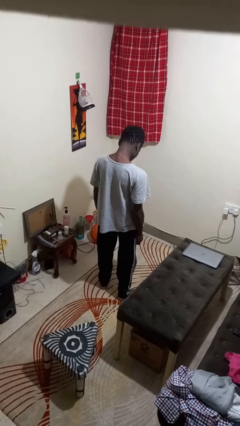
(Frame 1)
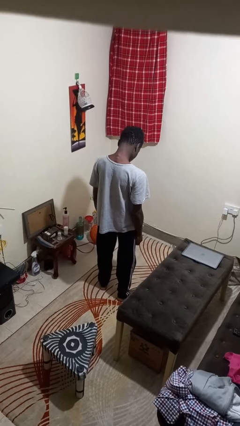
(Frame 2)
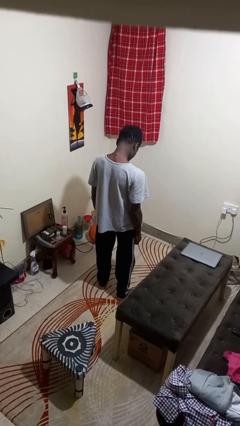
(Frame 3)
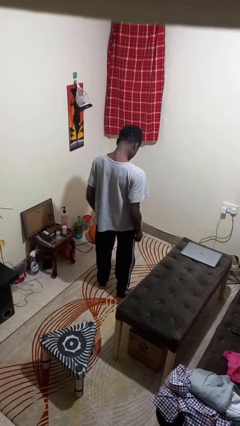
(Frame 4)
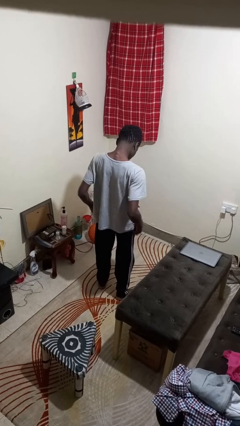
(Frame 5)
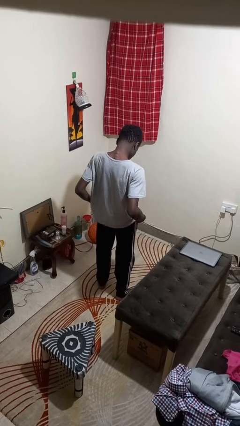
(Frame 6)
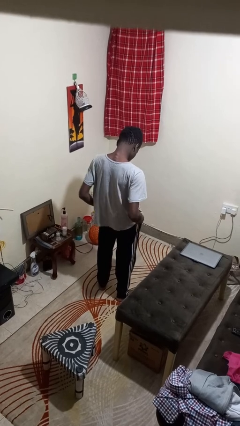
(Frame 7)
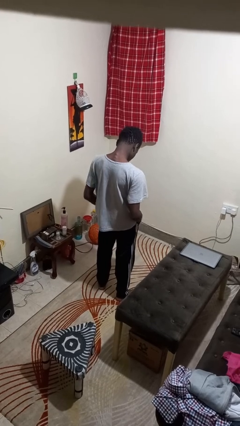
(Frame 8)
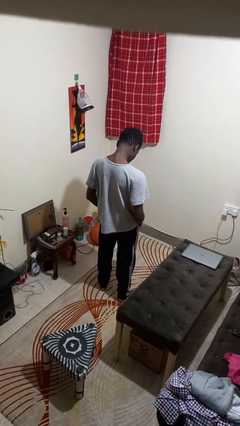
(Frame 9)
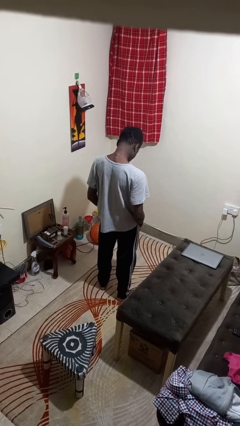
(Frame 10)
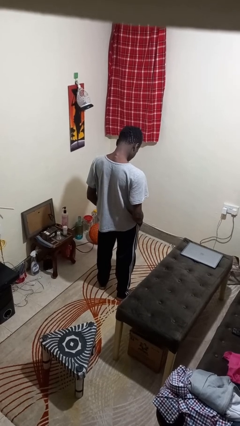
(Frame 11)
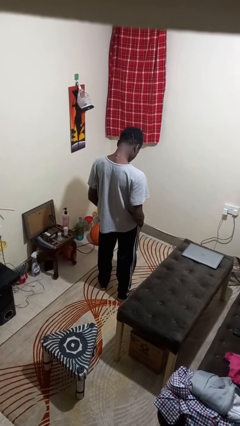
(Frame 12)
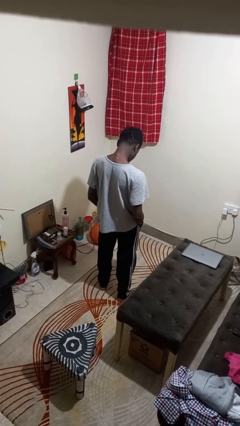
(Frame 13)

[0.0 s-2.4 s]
person puts hands in back pockets

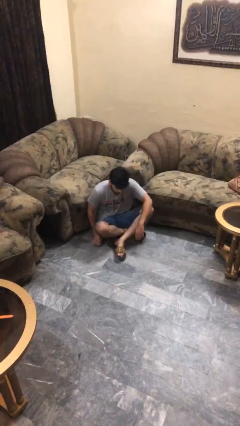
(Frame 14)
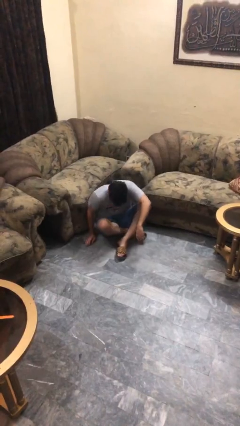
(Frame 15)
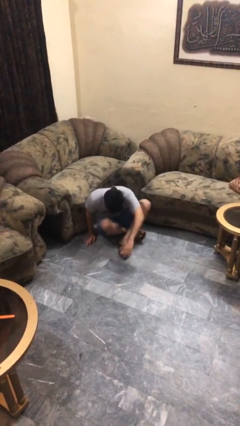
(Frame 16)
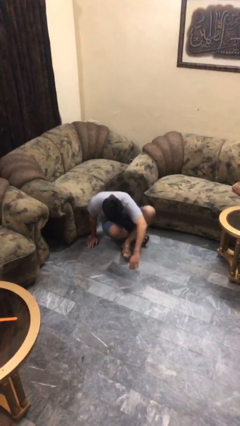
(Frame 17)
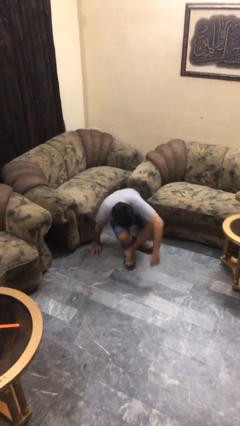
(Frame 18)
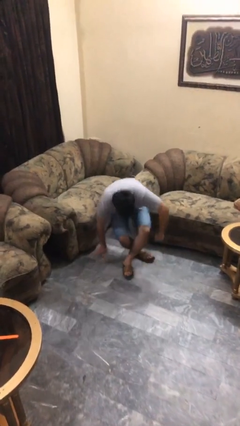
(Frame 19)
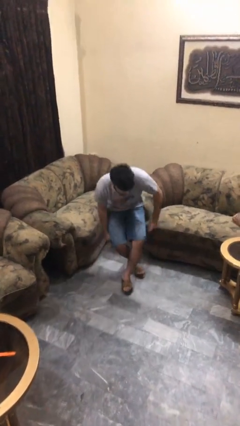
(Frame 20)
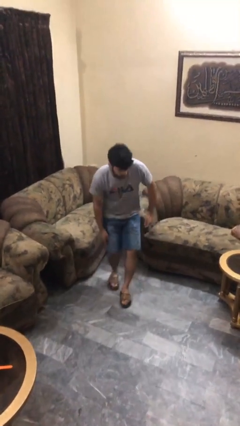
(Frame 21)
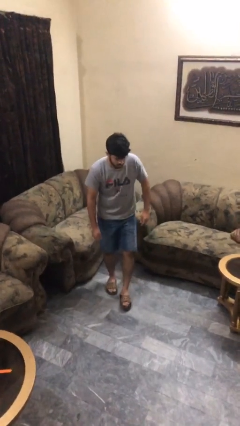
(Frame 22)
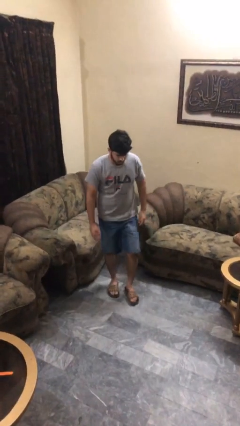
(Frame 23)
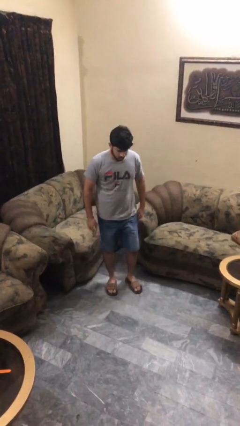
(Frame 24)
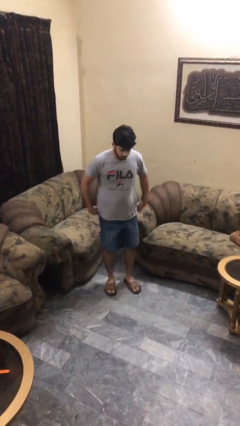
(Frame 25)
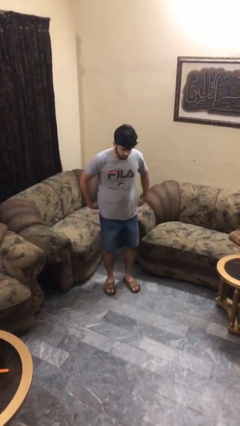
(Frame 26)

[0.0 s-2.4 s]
person stands up from floor

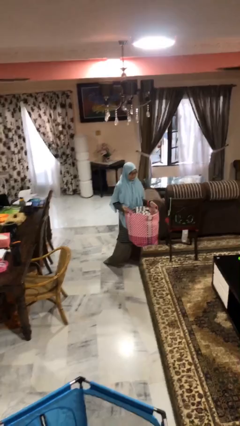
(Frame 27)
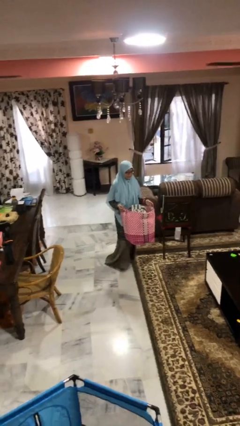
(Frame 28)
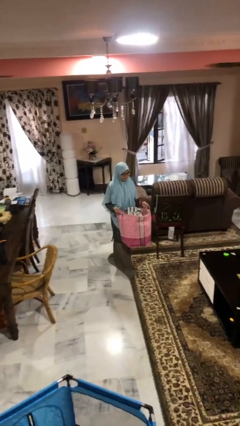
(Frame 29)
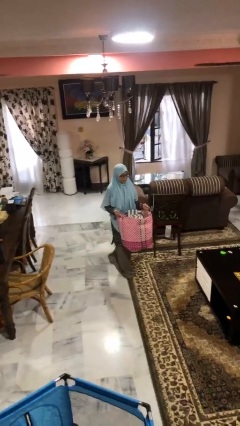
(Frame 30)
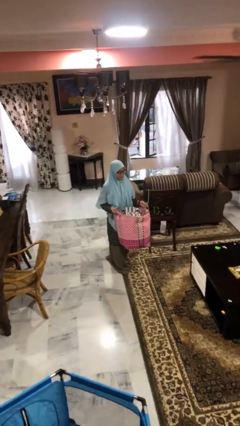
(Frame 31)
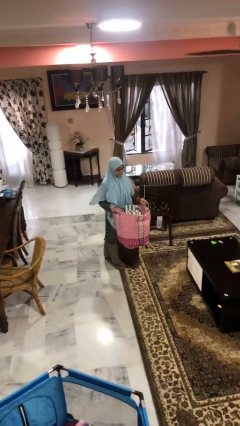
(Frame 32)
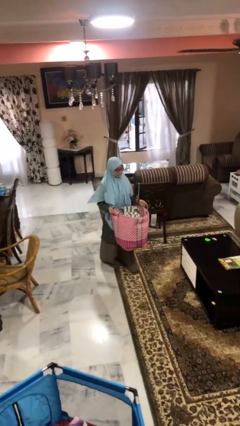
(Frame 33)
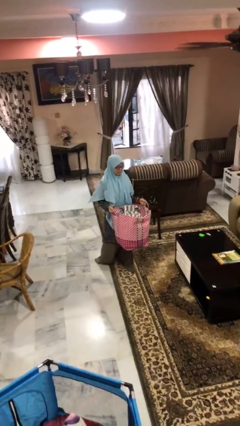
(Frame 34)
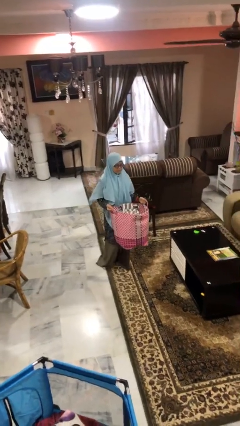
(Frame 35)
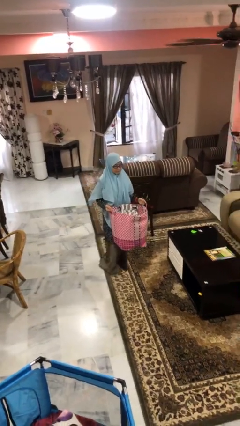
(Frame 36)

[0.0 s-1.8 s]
person carries laundry basket

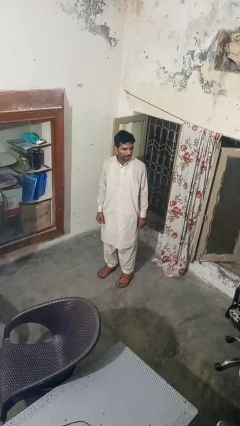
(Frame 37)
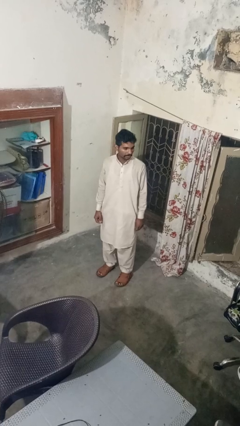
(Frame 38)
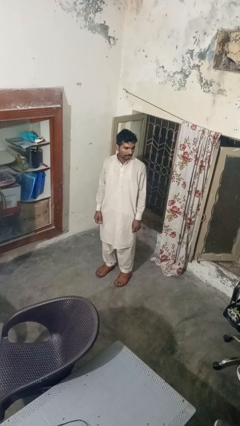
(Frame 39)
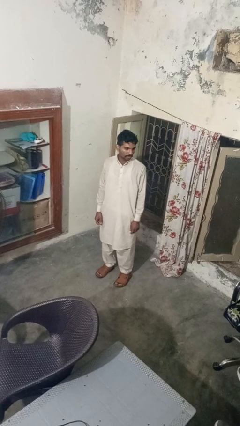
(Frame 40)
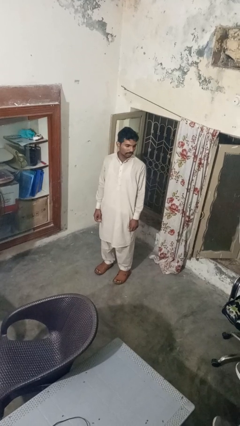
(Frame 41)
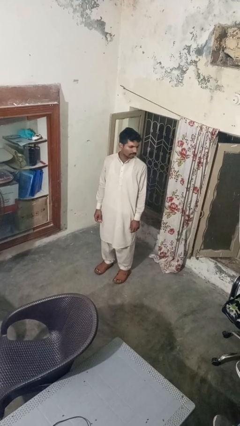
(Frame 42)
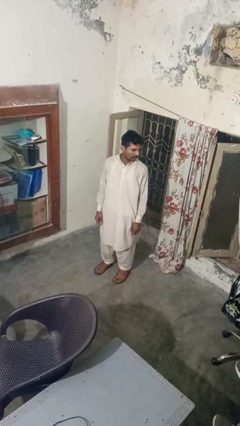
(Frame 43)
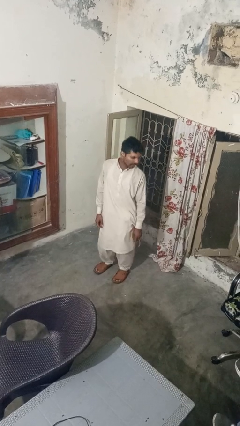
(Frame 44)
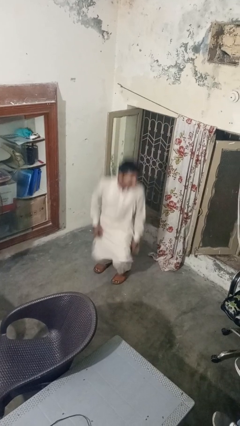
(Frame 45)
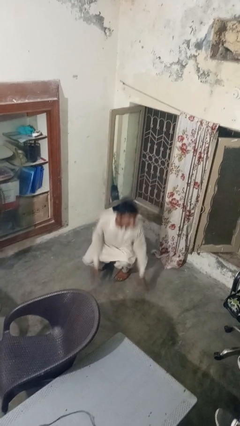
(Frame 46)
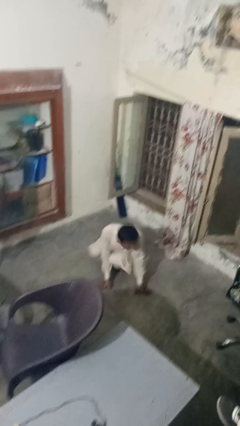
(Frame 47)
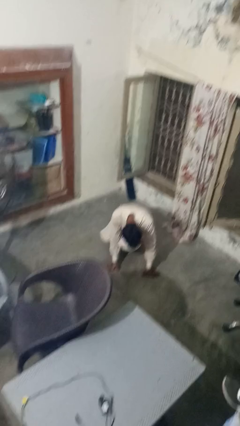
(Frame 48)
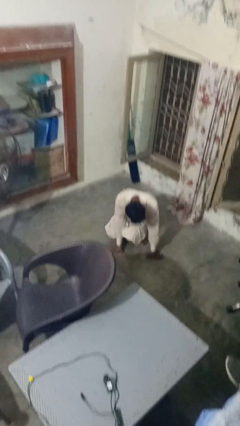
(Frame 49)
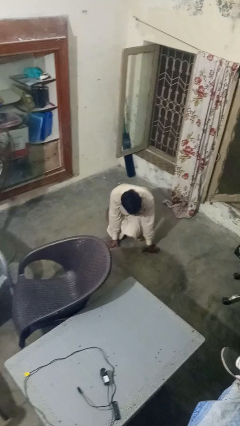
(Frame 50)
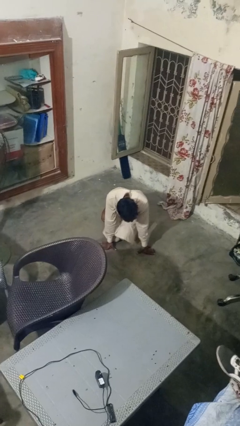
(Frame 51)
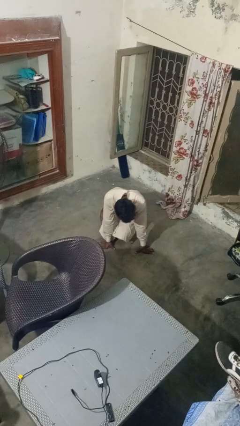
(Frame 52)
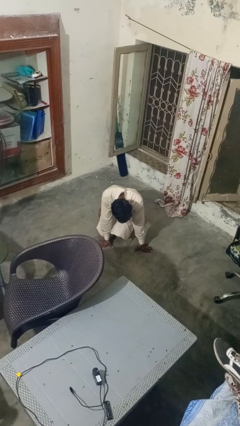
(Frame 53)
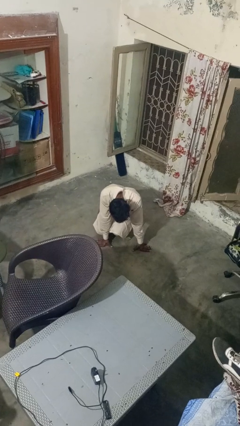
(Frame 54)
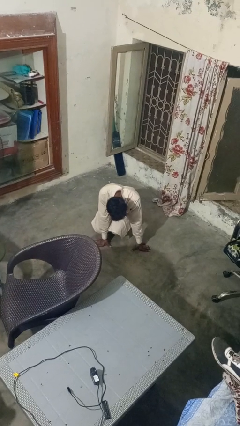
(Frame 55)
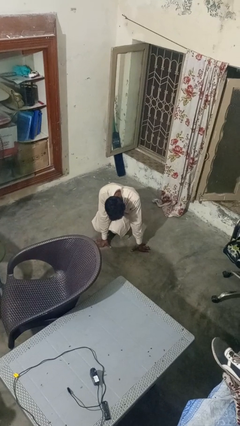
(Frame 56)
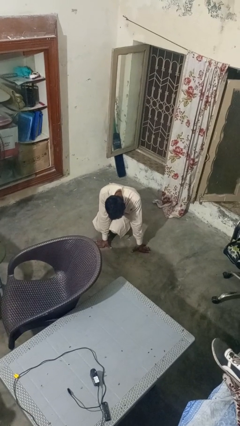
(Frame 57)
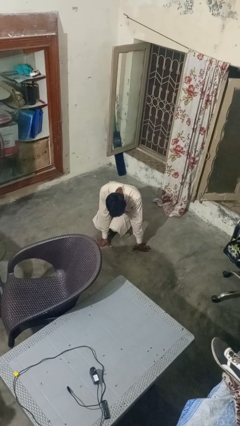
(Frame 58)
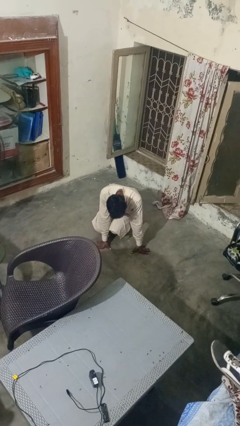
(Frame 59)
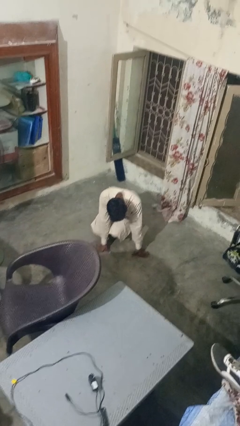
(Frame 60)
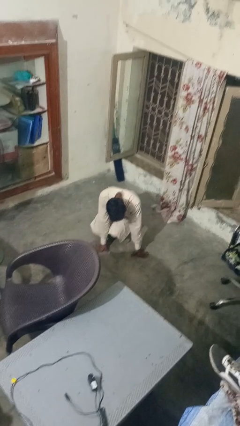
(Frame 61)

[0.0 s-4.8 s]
person falls while standing

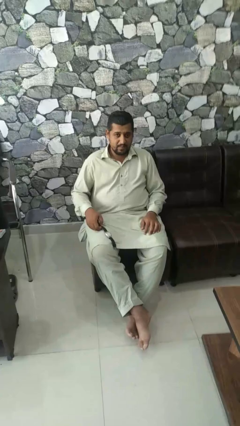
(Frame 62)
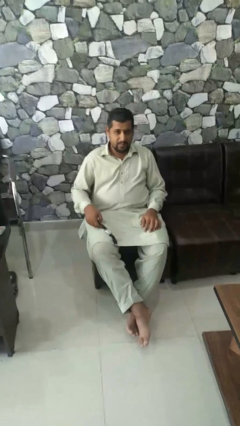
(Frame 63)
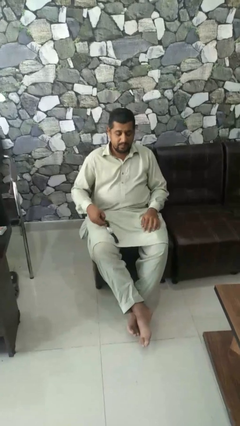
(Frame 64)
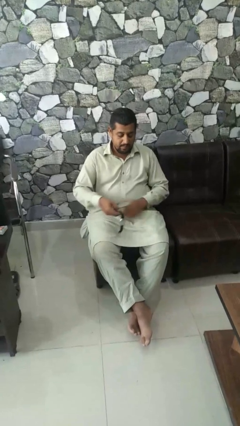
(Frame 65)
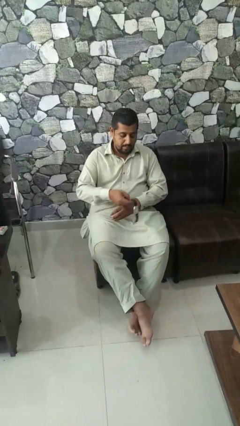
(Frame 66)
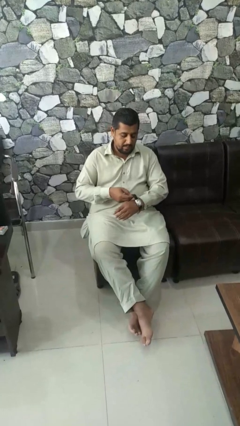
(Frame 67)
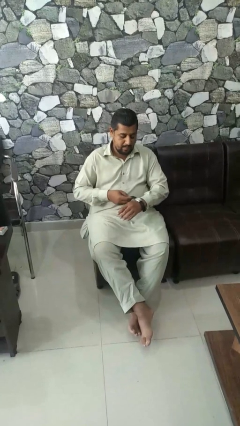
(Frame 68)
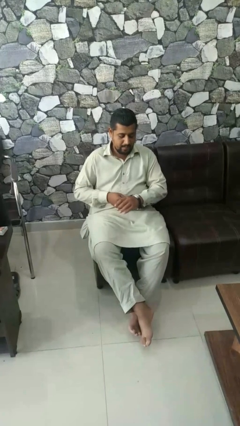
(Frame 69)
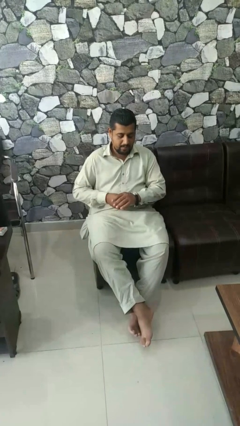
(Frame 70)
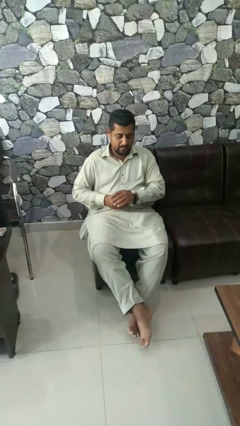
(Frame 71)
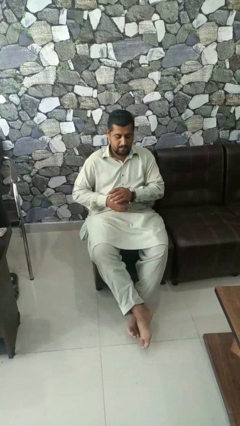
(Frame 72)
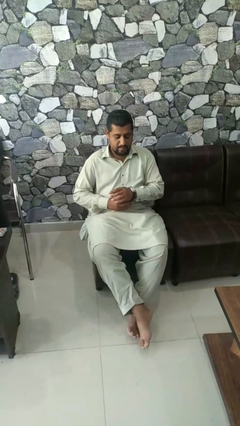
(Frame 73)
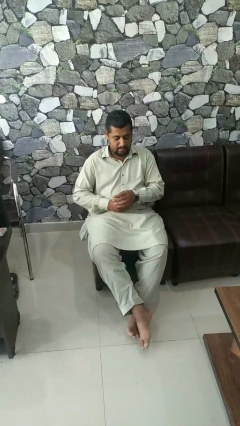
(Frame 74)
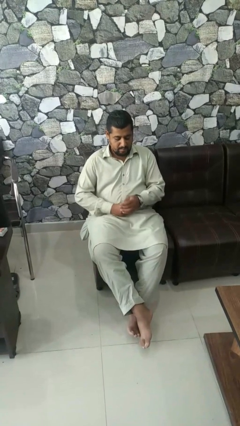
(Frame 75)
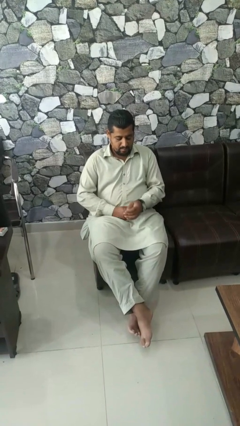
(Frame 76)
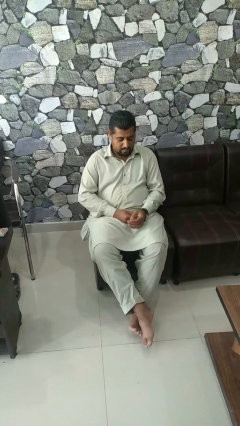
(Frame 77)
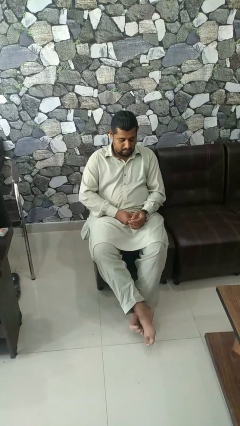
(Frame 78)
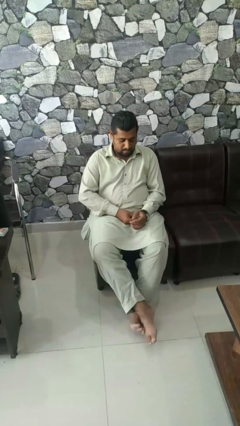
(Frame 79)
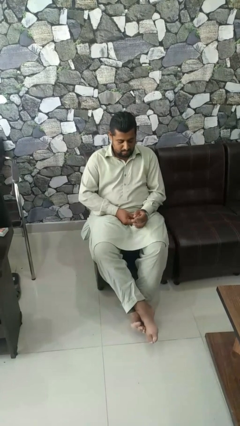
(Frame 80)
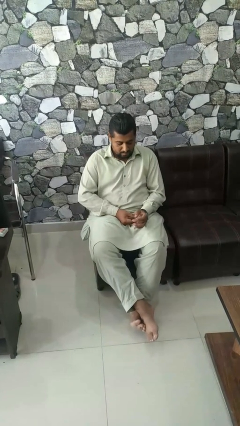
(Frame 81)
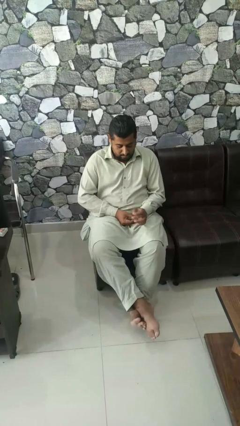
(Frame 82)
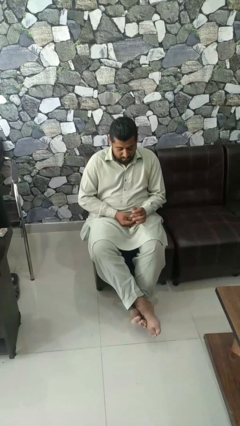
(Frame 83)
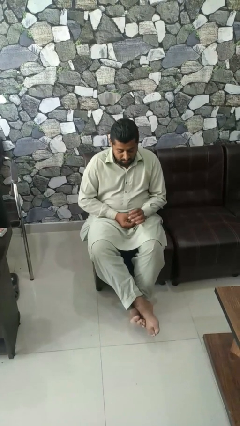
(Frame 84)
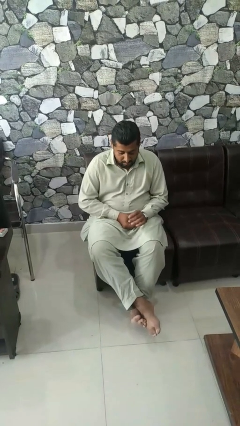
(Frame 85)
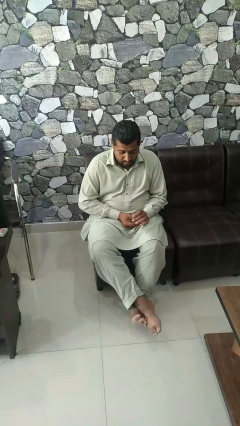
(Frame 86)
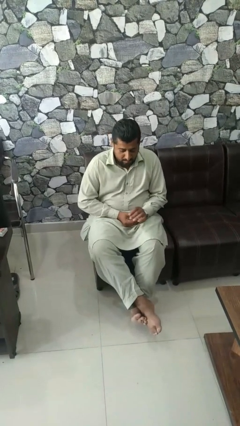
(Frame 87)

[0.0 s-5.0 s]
person puts on wristwatch

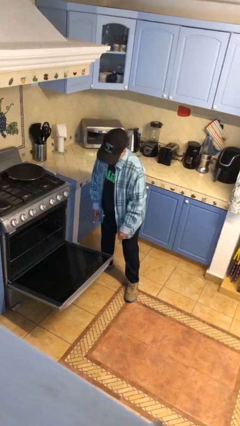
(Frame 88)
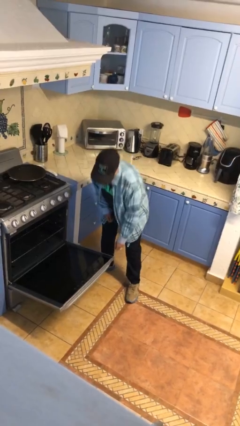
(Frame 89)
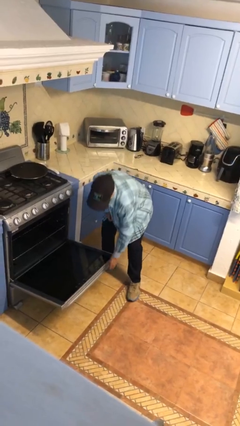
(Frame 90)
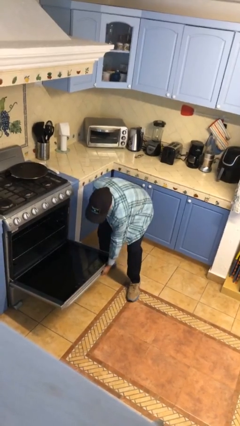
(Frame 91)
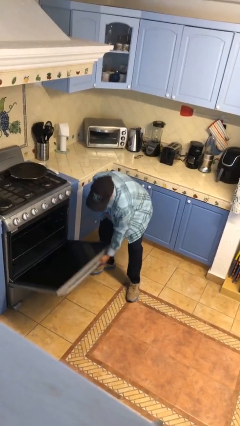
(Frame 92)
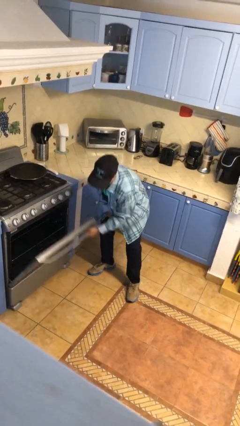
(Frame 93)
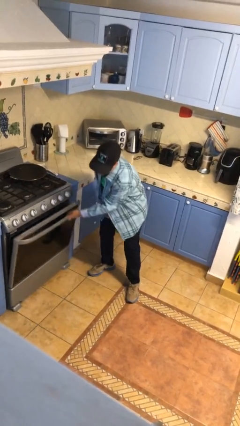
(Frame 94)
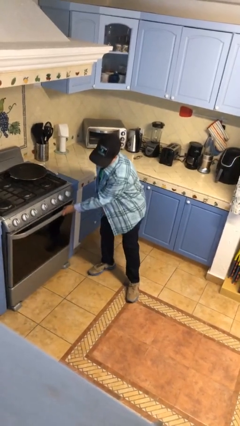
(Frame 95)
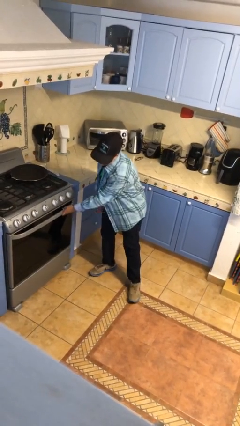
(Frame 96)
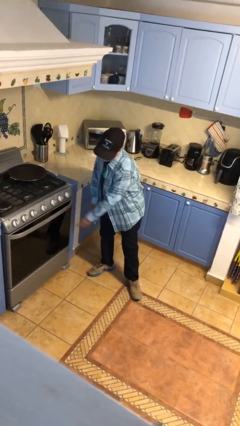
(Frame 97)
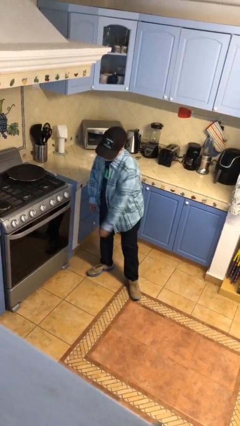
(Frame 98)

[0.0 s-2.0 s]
person closes oven door
